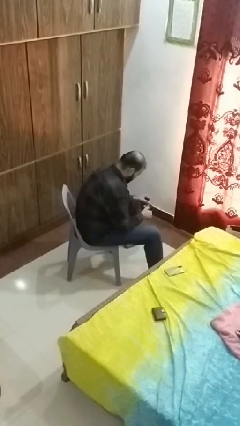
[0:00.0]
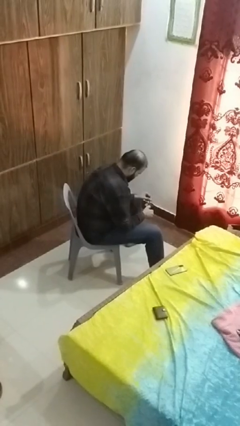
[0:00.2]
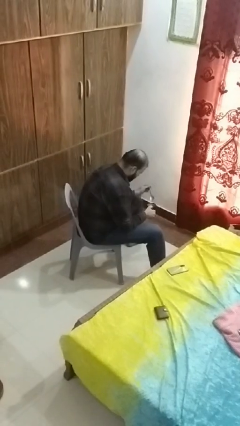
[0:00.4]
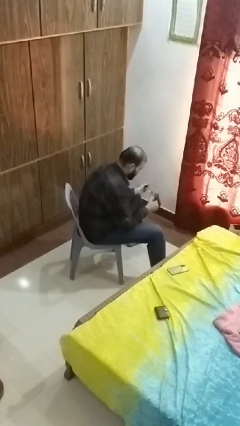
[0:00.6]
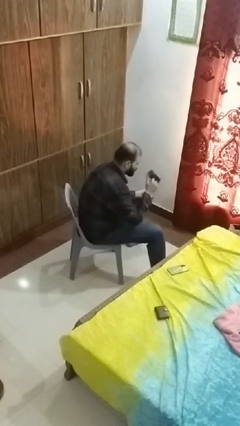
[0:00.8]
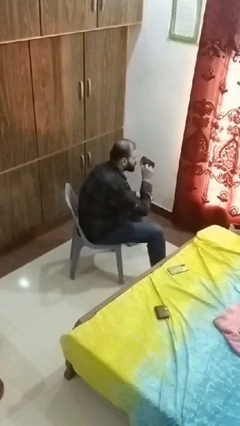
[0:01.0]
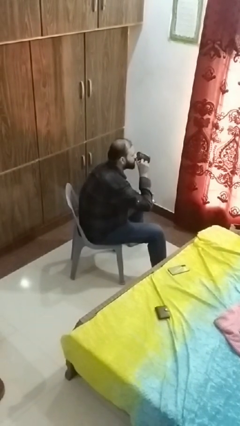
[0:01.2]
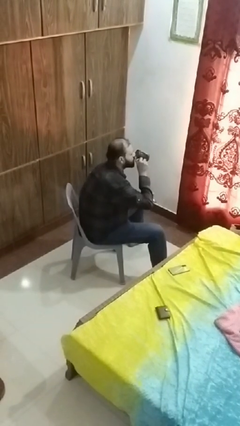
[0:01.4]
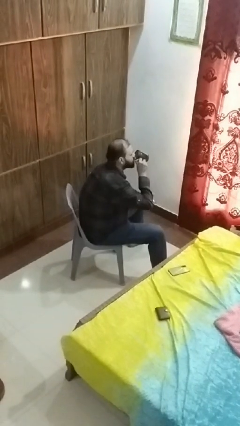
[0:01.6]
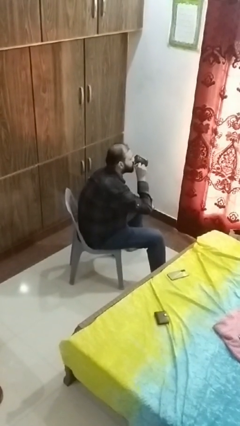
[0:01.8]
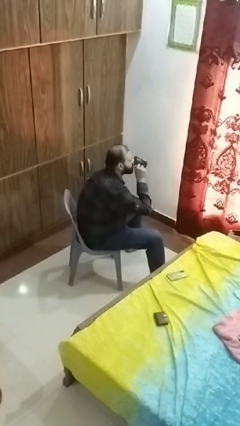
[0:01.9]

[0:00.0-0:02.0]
person drinks from mug

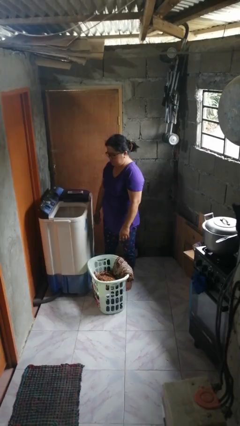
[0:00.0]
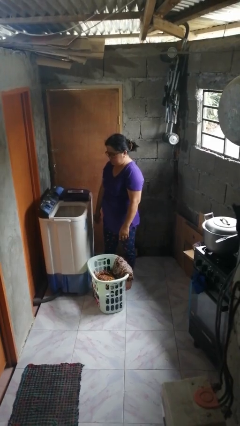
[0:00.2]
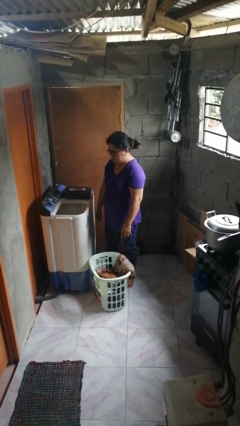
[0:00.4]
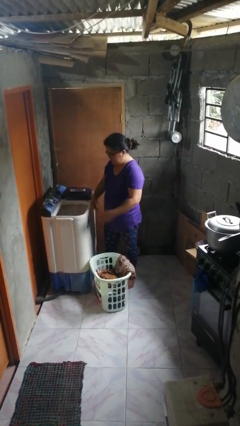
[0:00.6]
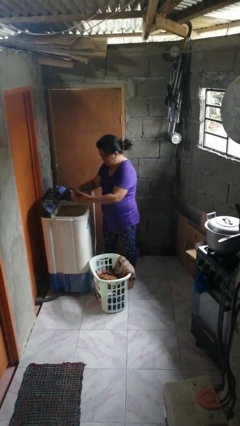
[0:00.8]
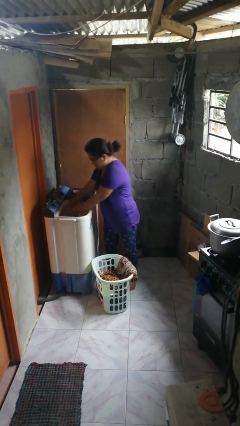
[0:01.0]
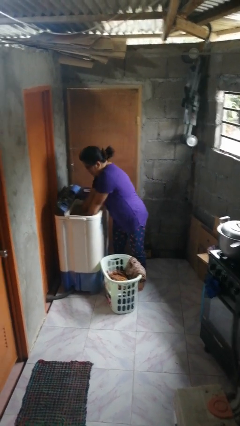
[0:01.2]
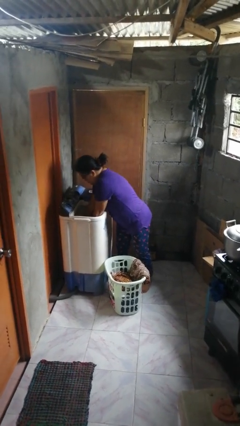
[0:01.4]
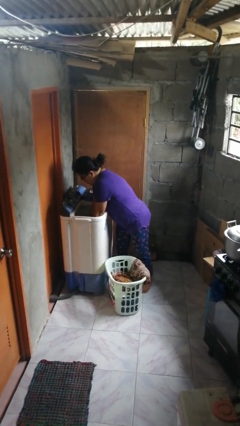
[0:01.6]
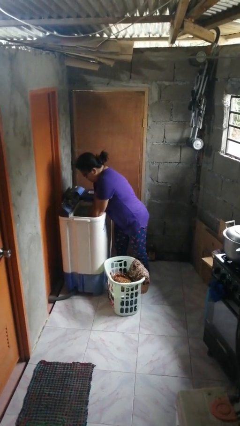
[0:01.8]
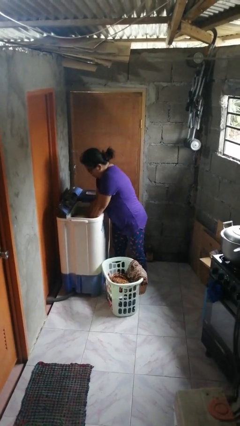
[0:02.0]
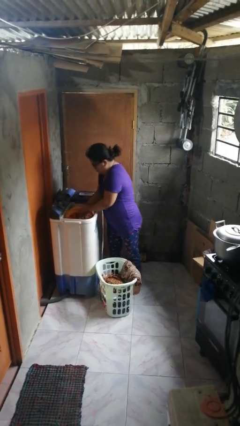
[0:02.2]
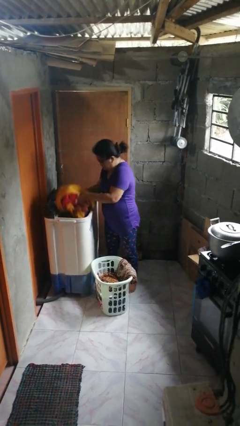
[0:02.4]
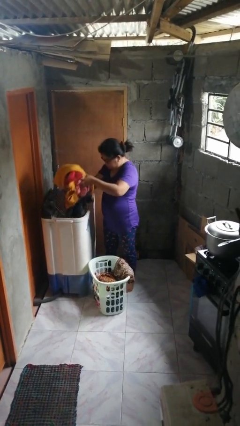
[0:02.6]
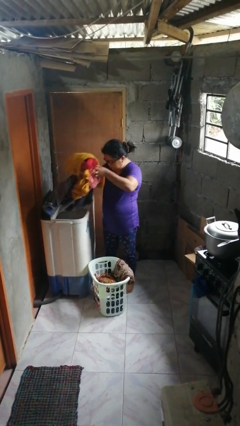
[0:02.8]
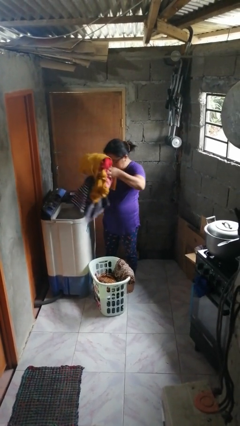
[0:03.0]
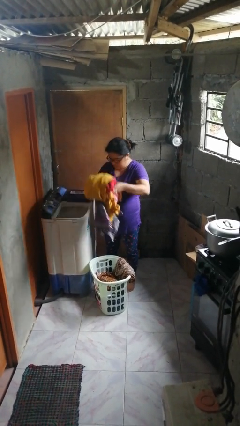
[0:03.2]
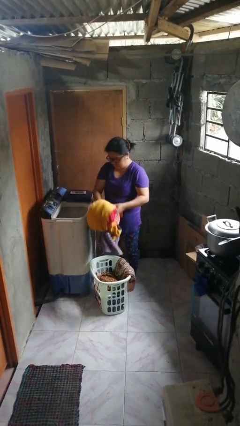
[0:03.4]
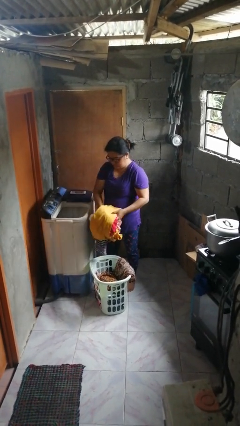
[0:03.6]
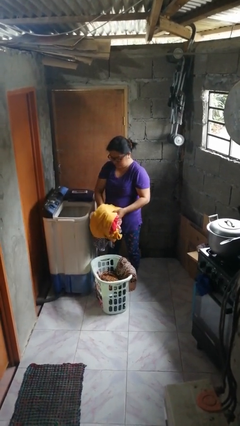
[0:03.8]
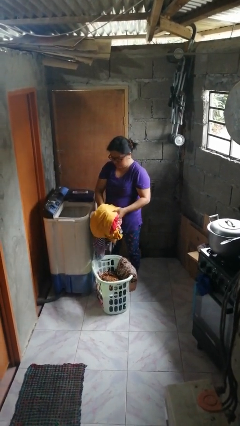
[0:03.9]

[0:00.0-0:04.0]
person unloads clotheswasher

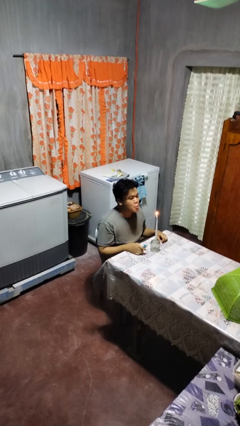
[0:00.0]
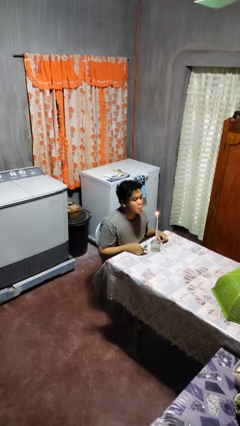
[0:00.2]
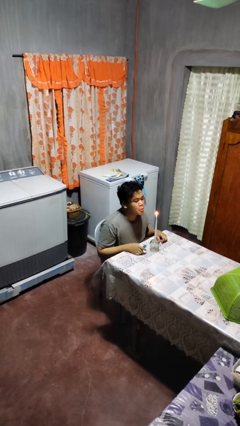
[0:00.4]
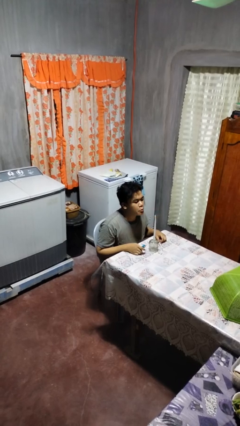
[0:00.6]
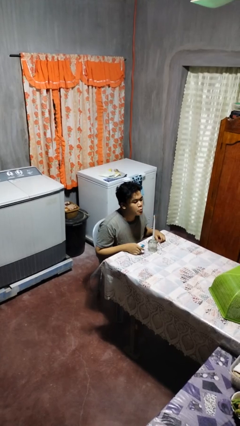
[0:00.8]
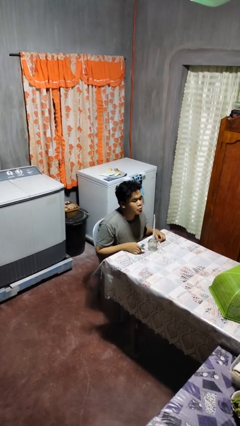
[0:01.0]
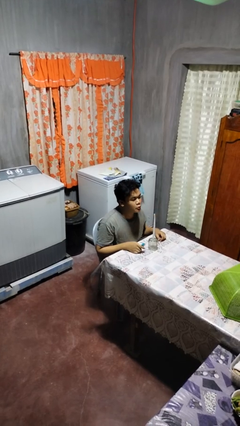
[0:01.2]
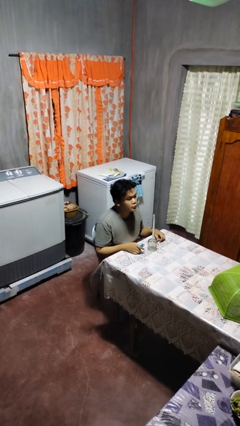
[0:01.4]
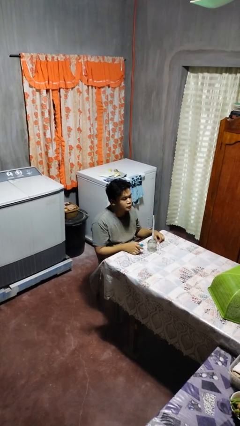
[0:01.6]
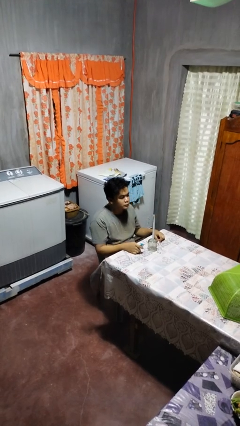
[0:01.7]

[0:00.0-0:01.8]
person extinguishes candle

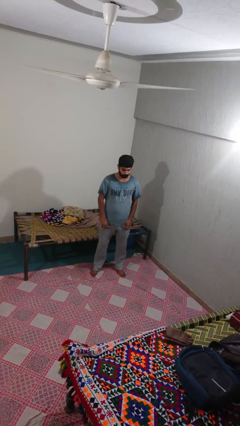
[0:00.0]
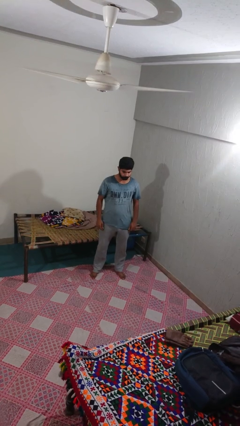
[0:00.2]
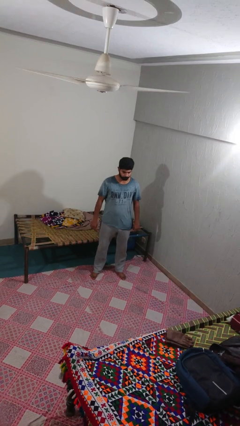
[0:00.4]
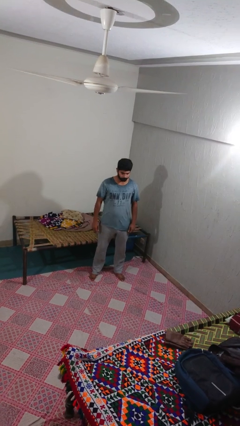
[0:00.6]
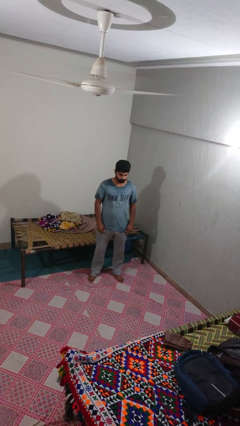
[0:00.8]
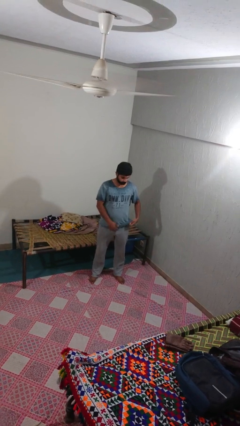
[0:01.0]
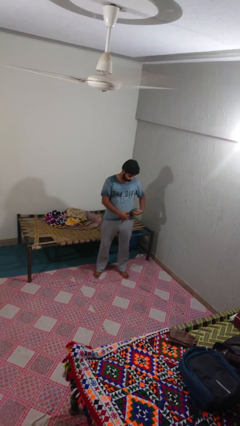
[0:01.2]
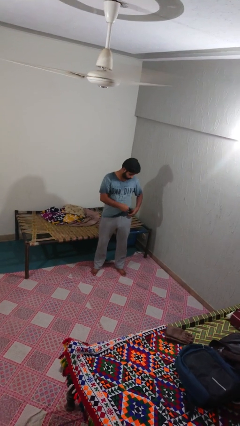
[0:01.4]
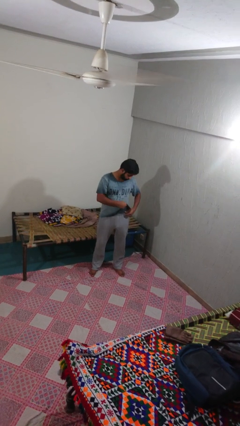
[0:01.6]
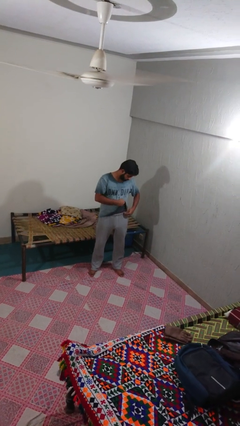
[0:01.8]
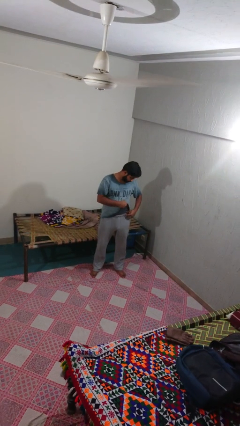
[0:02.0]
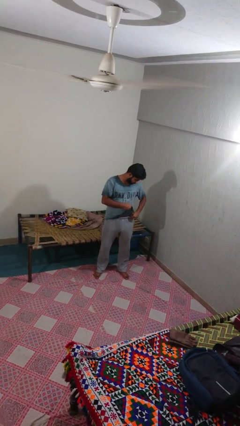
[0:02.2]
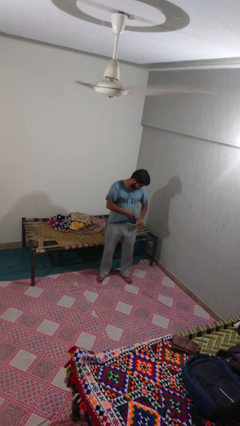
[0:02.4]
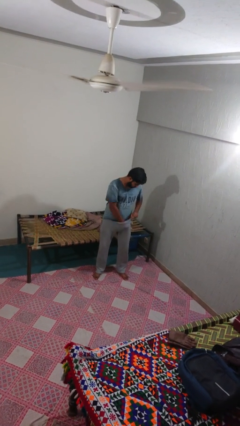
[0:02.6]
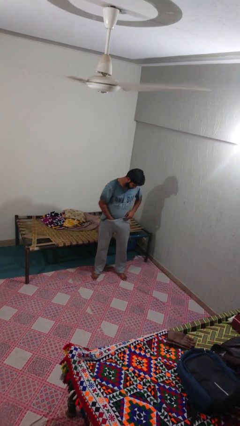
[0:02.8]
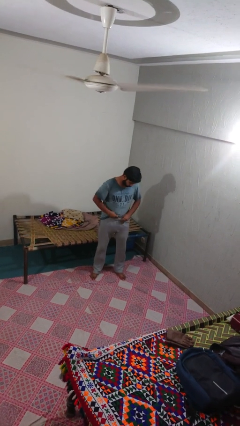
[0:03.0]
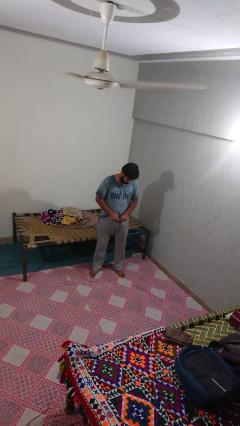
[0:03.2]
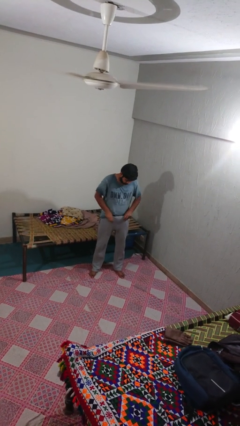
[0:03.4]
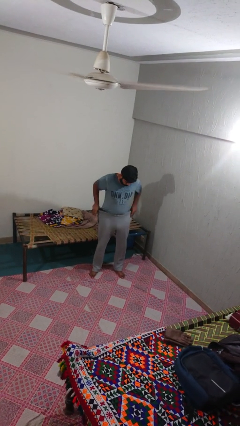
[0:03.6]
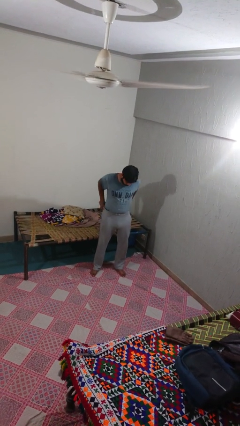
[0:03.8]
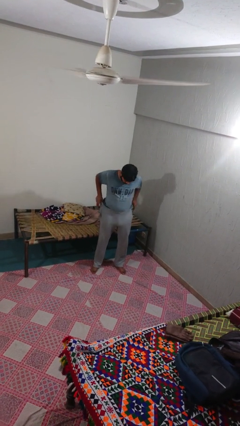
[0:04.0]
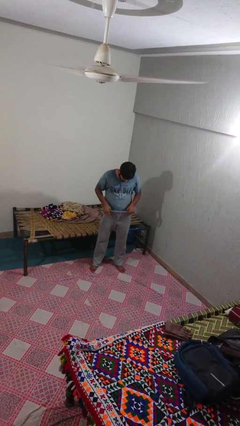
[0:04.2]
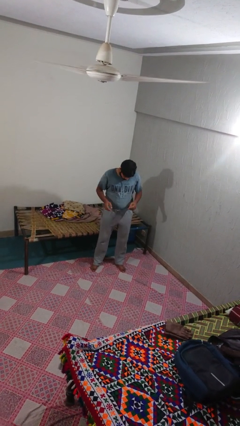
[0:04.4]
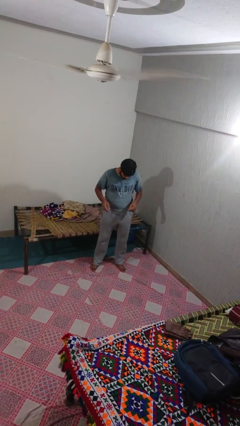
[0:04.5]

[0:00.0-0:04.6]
person tucks in shirt

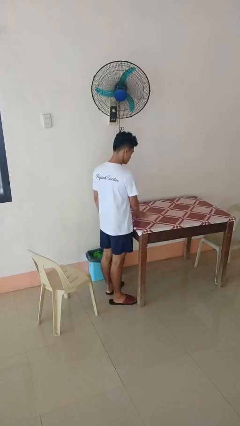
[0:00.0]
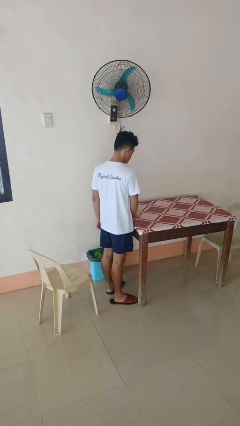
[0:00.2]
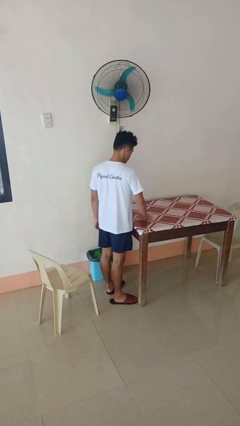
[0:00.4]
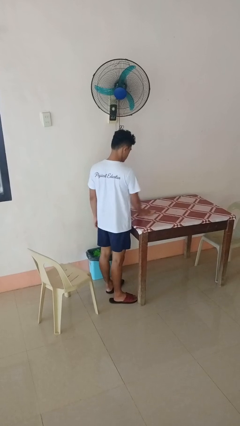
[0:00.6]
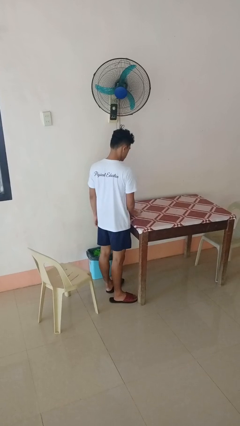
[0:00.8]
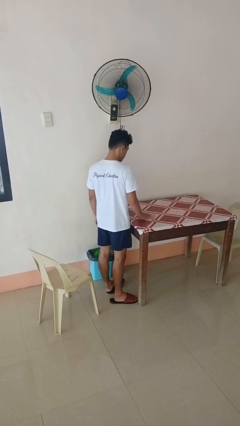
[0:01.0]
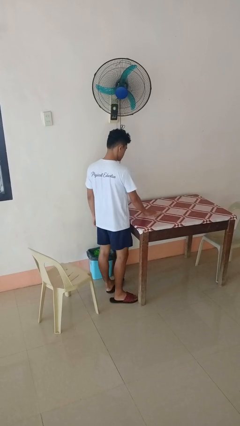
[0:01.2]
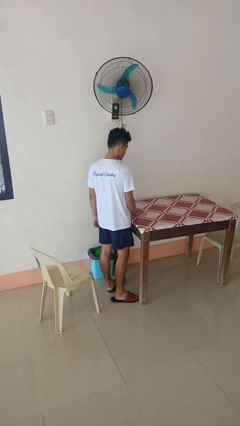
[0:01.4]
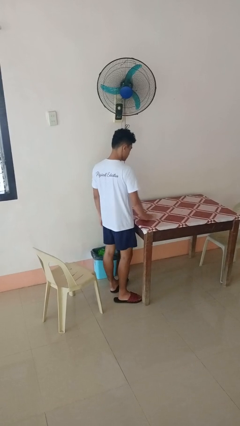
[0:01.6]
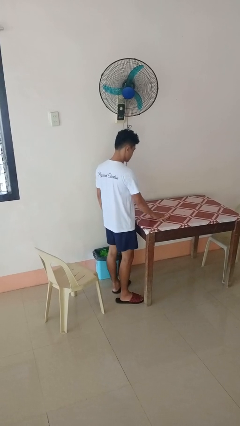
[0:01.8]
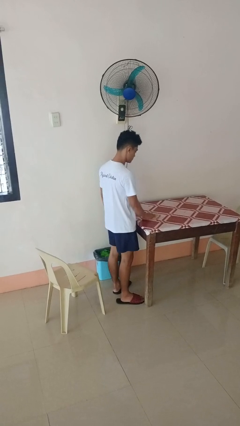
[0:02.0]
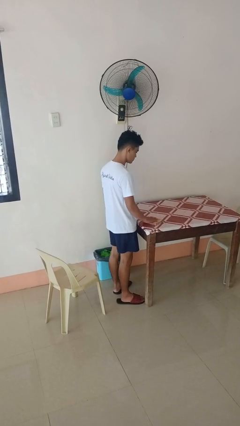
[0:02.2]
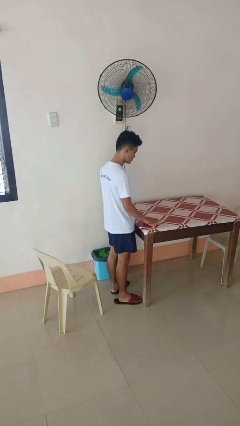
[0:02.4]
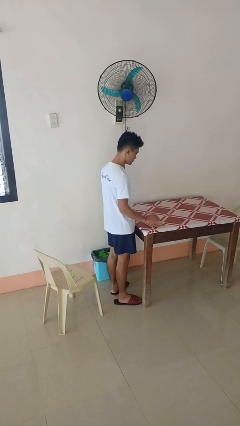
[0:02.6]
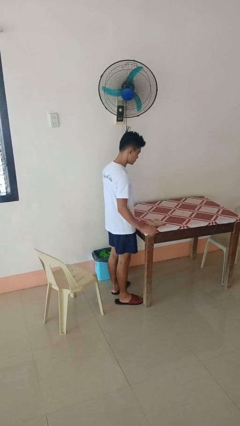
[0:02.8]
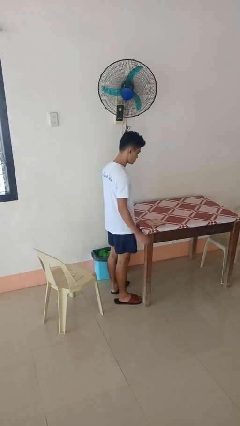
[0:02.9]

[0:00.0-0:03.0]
person cleans table with rag

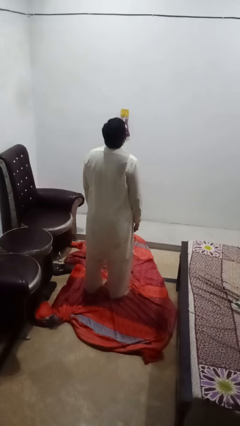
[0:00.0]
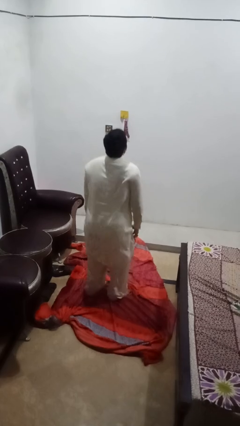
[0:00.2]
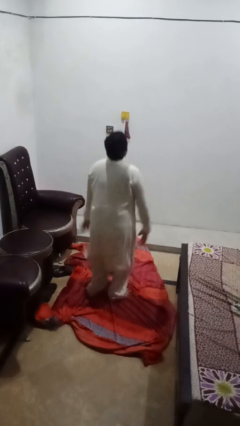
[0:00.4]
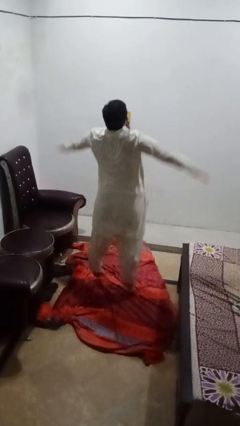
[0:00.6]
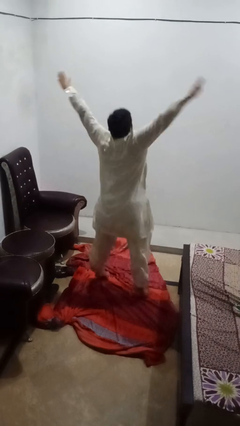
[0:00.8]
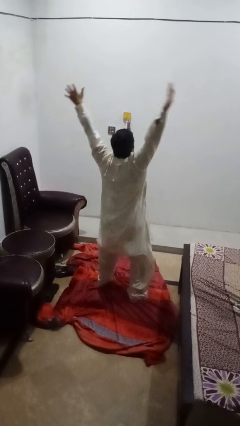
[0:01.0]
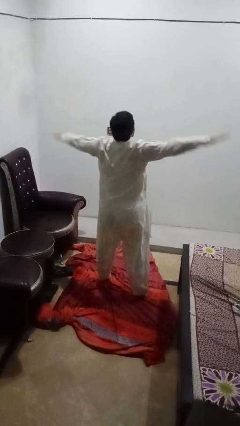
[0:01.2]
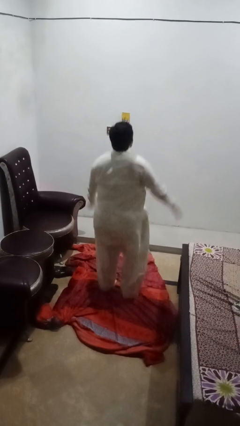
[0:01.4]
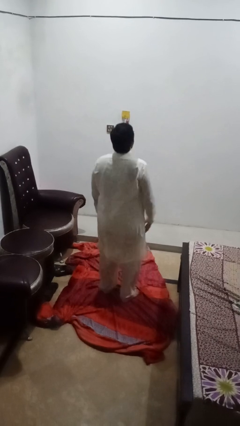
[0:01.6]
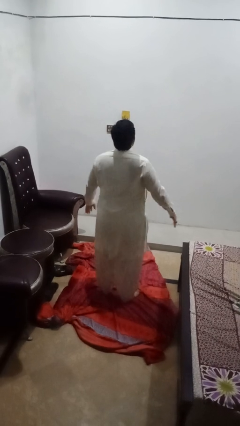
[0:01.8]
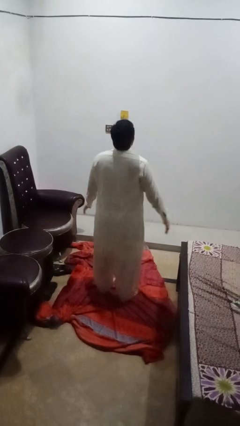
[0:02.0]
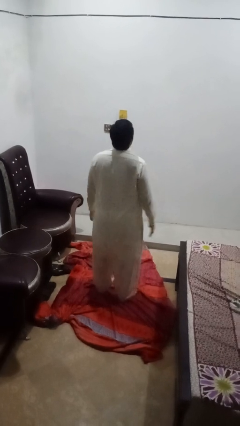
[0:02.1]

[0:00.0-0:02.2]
person exercises with jumping jacks
